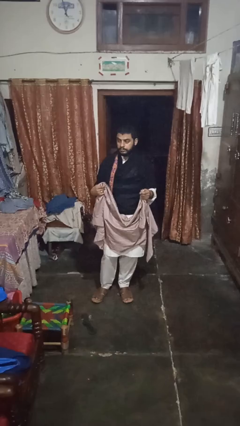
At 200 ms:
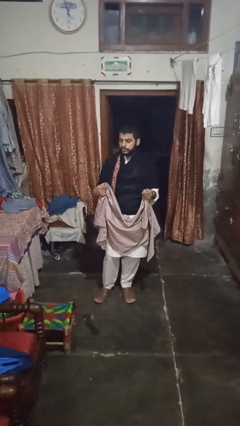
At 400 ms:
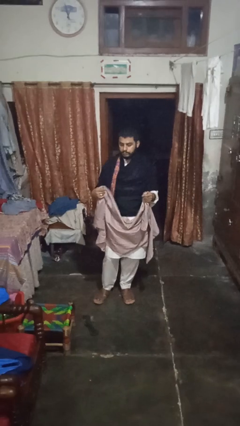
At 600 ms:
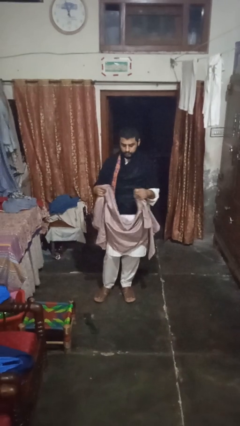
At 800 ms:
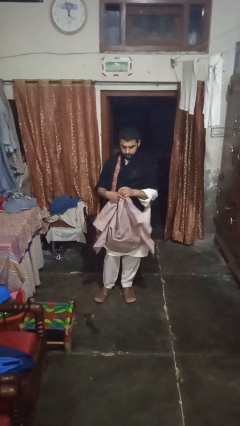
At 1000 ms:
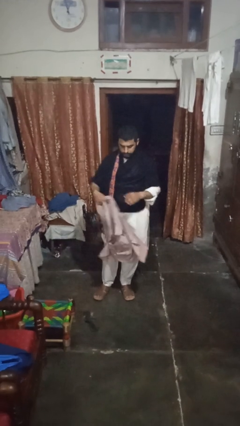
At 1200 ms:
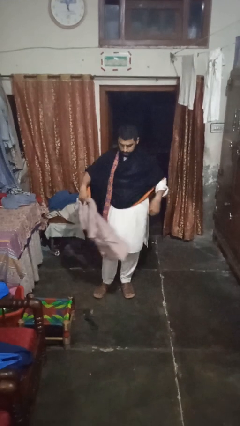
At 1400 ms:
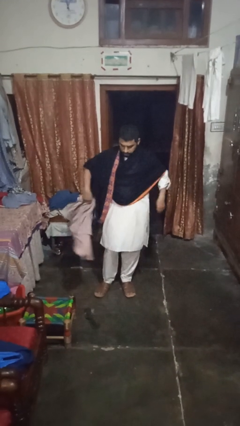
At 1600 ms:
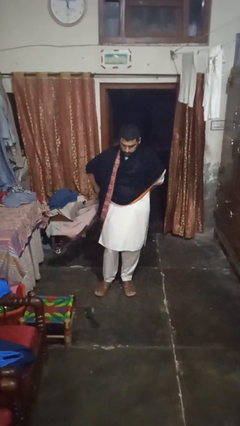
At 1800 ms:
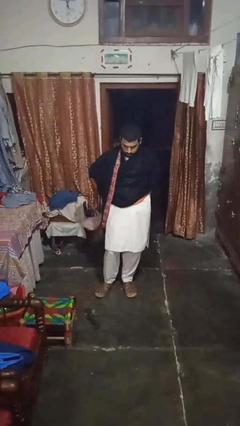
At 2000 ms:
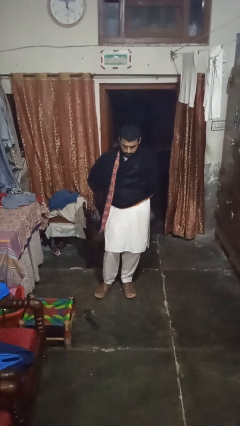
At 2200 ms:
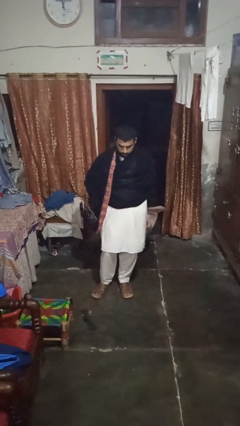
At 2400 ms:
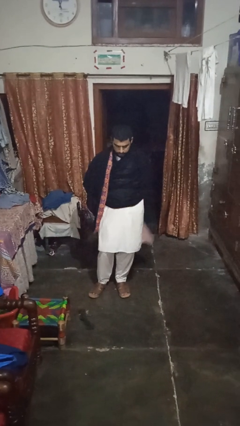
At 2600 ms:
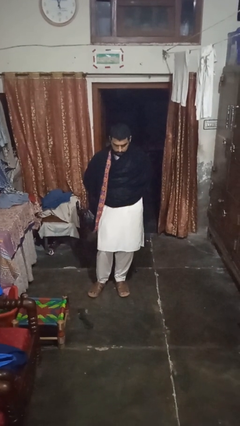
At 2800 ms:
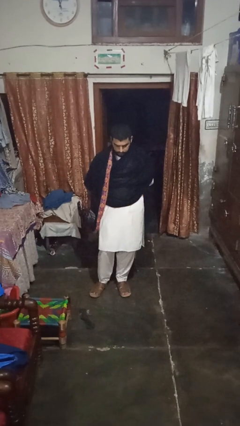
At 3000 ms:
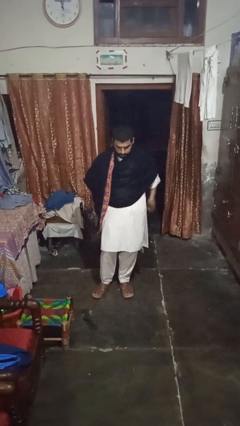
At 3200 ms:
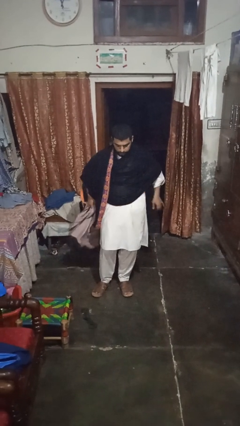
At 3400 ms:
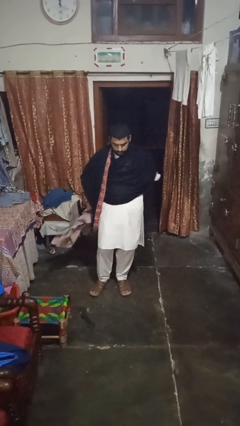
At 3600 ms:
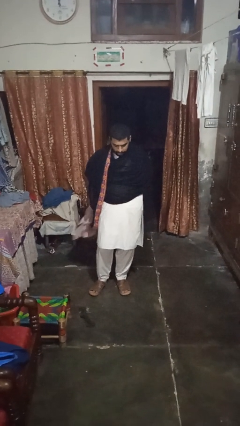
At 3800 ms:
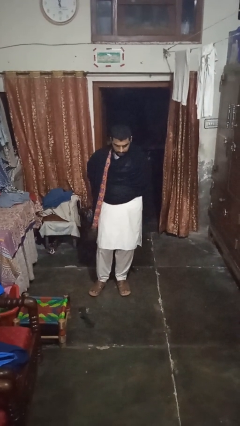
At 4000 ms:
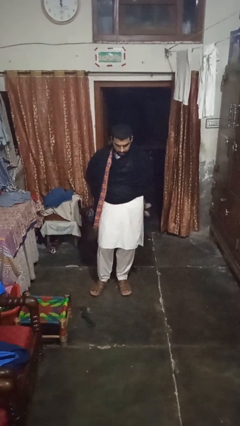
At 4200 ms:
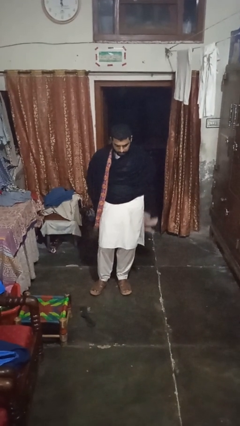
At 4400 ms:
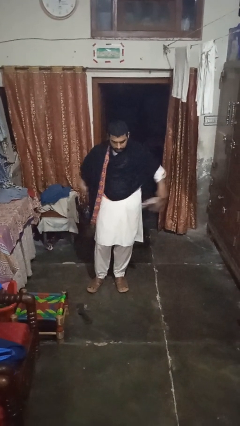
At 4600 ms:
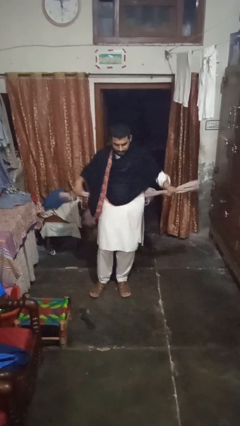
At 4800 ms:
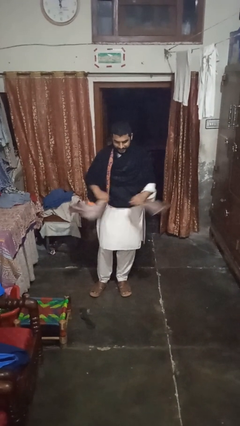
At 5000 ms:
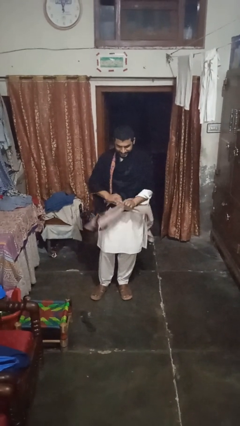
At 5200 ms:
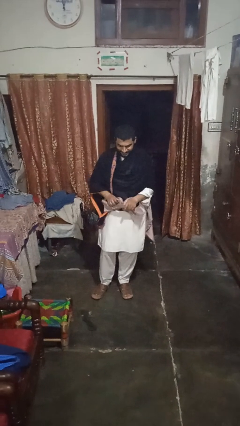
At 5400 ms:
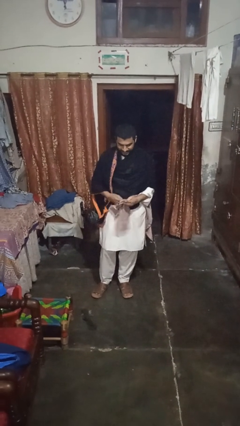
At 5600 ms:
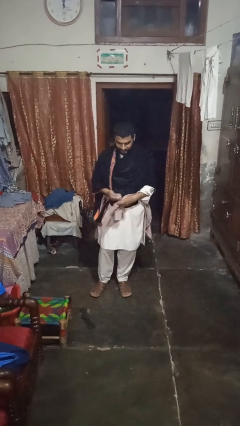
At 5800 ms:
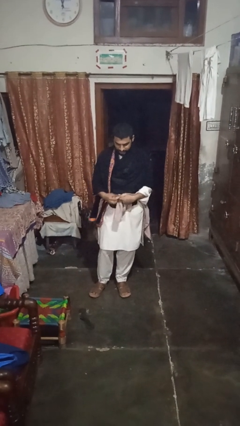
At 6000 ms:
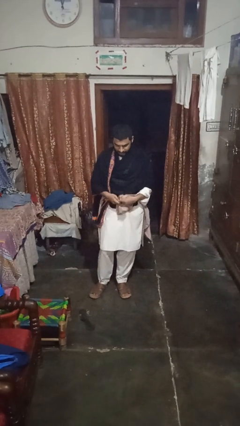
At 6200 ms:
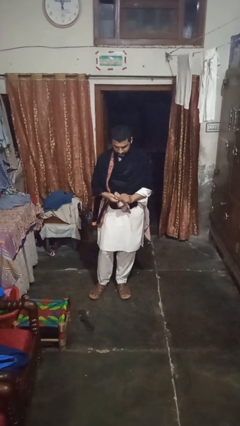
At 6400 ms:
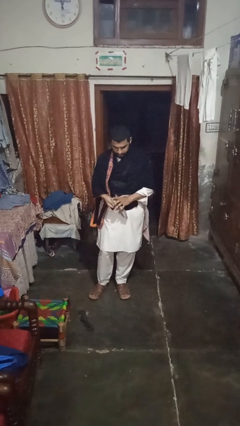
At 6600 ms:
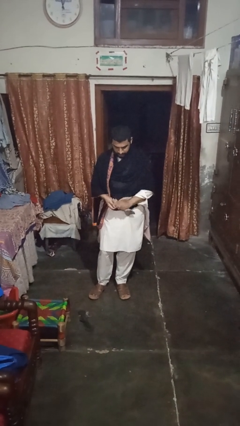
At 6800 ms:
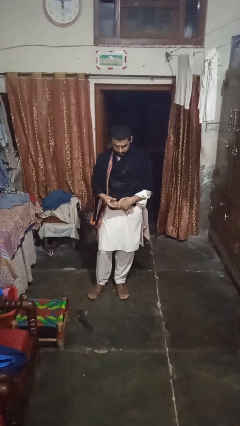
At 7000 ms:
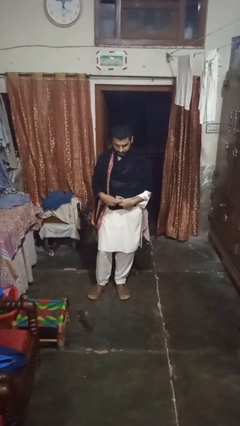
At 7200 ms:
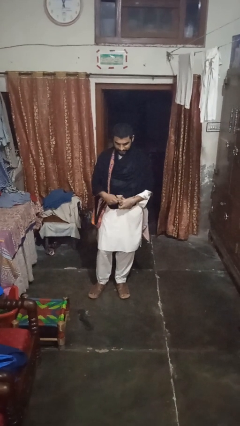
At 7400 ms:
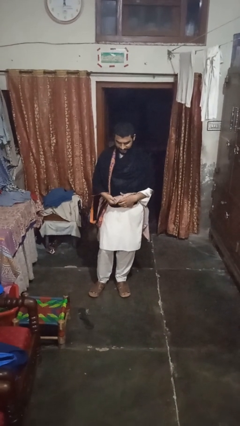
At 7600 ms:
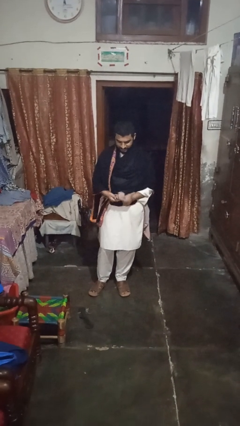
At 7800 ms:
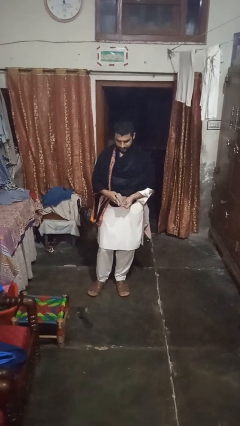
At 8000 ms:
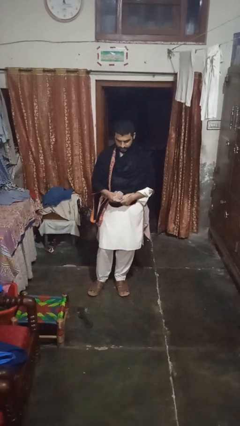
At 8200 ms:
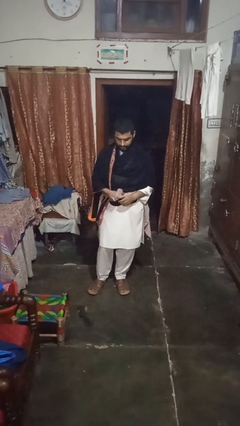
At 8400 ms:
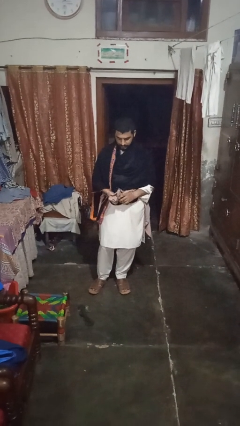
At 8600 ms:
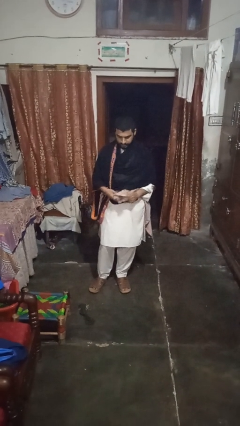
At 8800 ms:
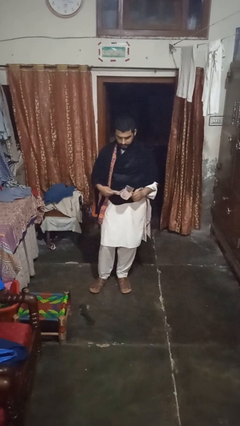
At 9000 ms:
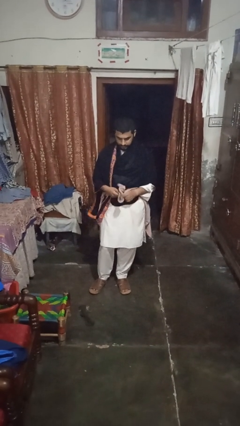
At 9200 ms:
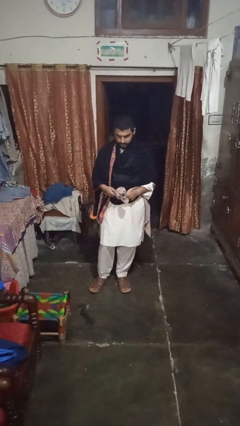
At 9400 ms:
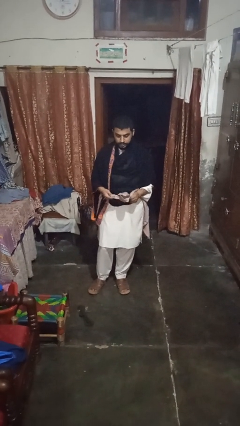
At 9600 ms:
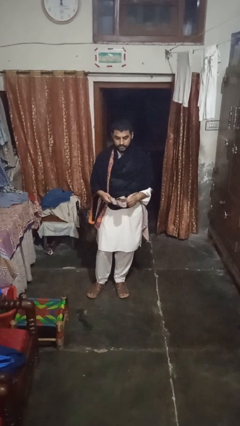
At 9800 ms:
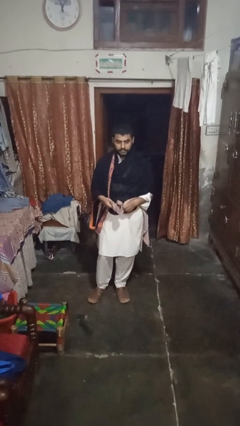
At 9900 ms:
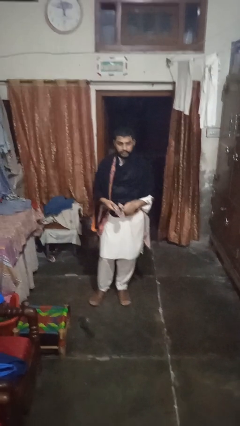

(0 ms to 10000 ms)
person ties jacket around waist

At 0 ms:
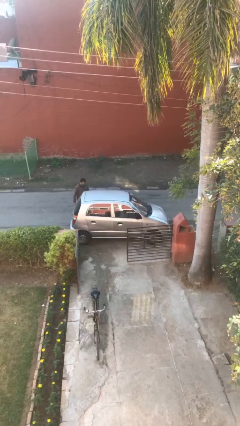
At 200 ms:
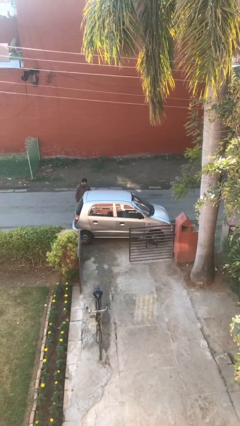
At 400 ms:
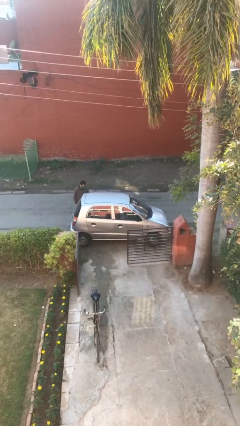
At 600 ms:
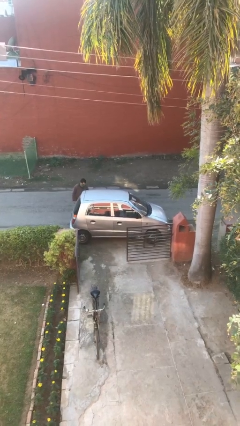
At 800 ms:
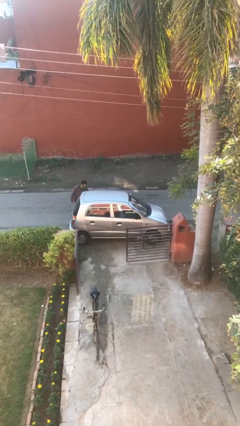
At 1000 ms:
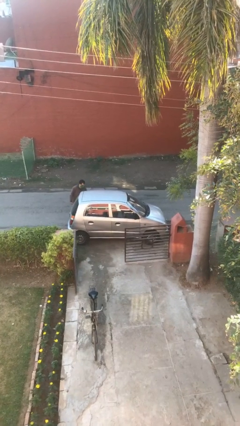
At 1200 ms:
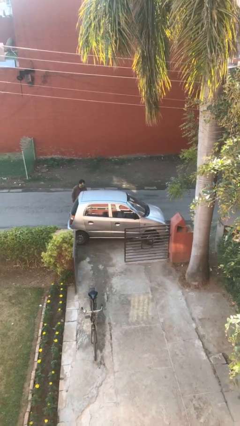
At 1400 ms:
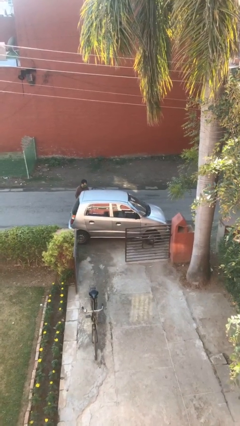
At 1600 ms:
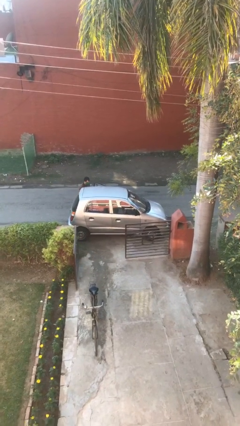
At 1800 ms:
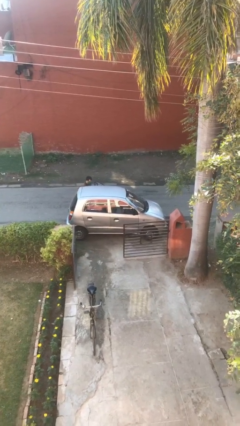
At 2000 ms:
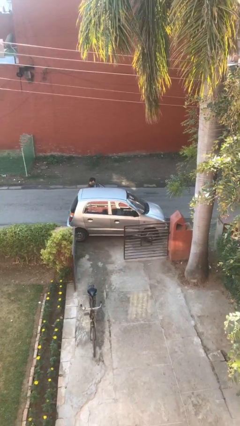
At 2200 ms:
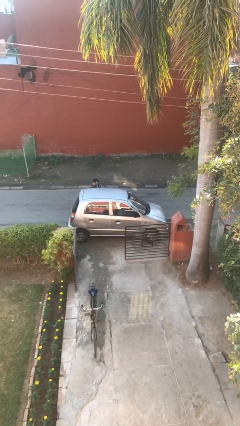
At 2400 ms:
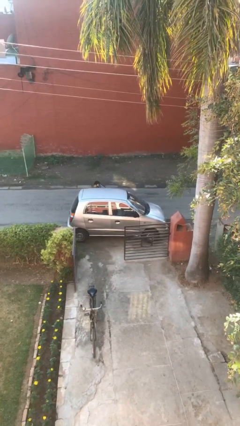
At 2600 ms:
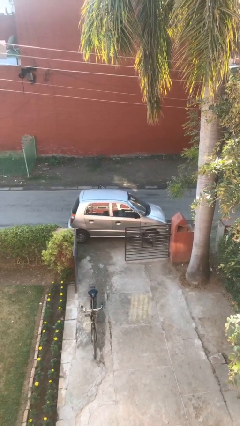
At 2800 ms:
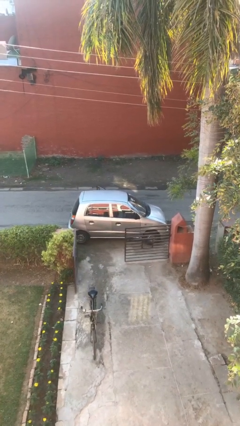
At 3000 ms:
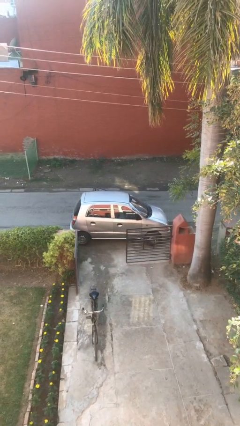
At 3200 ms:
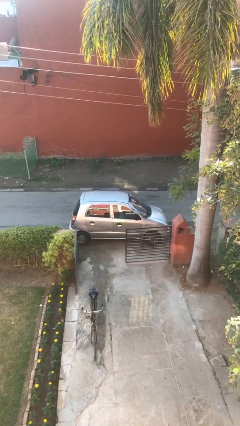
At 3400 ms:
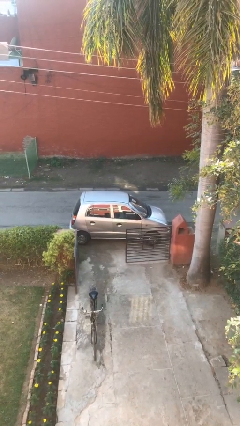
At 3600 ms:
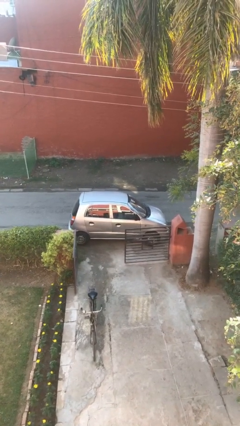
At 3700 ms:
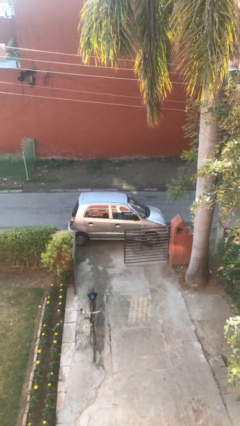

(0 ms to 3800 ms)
car picks up person

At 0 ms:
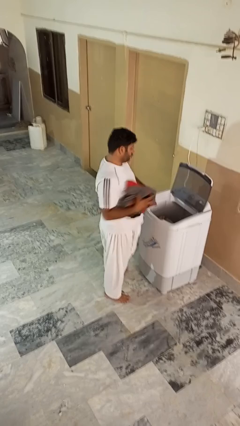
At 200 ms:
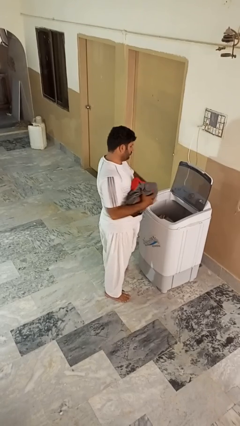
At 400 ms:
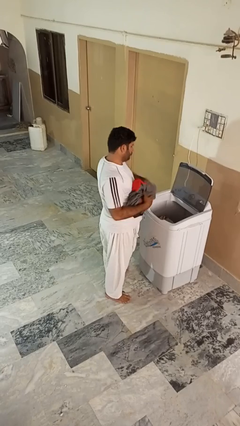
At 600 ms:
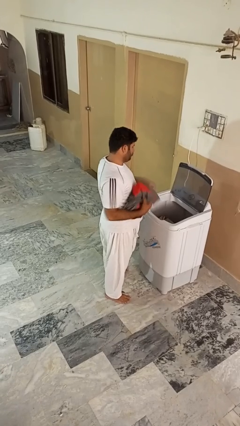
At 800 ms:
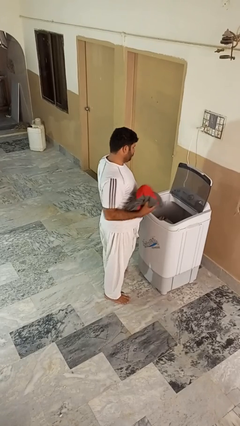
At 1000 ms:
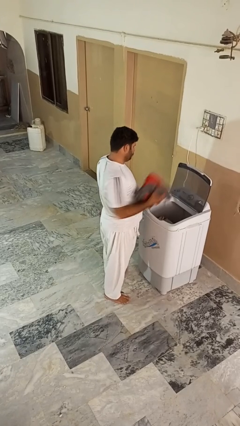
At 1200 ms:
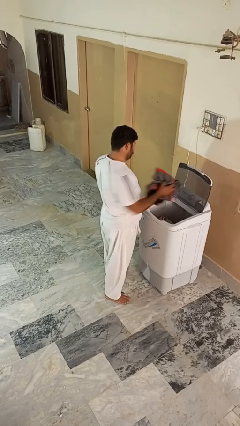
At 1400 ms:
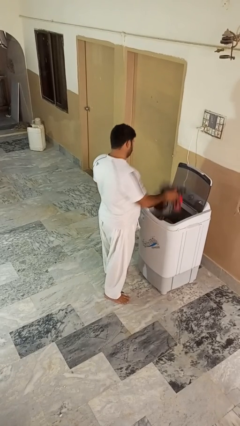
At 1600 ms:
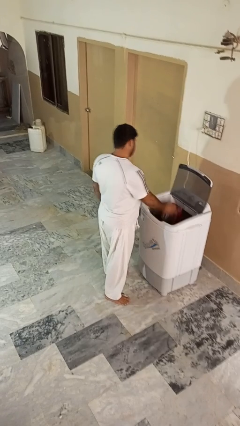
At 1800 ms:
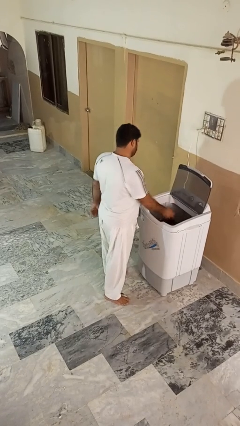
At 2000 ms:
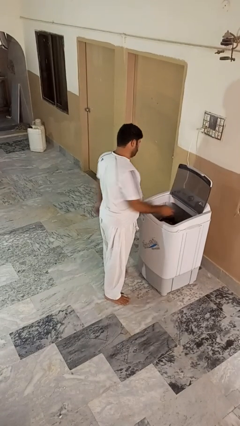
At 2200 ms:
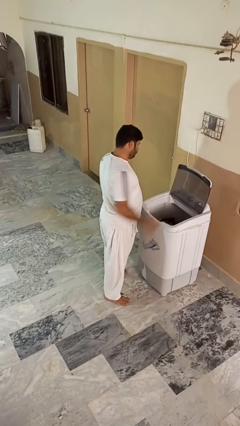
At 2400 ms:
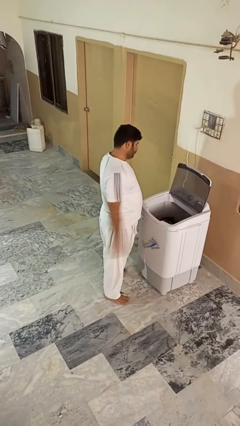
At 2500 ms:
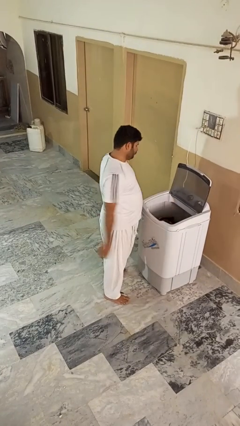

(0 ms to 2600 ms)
person loads clotheswasher

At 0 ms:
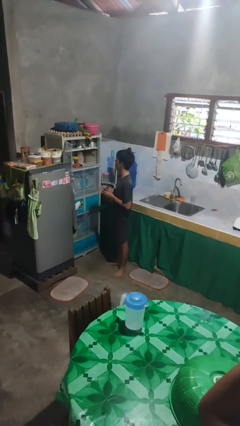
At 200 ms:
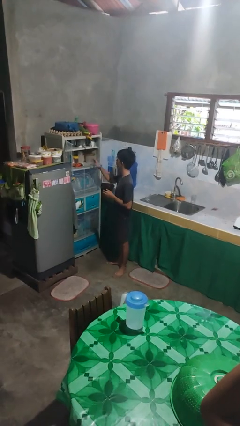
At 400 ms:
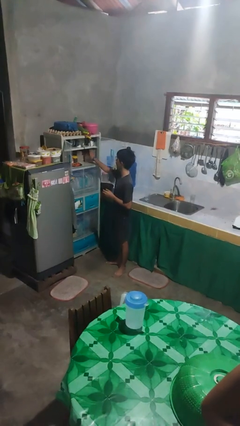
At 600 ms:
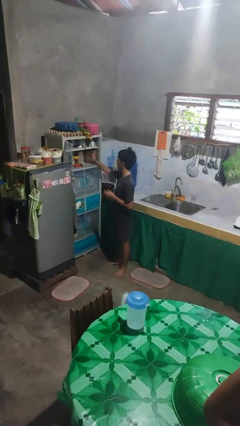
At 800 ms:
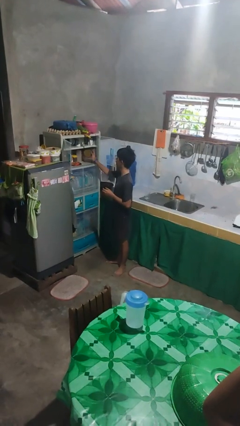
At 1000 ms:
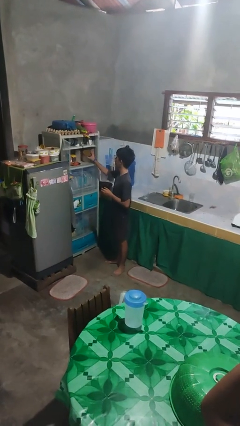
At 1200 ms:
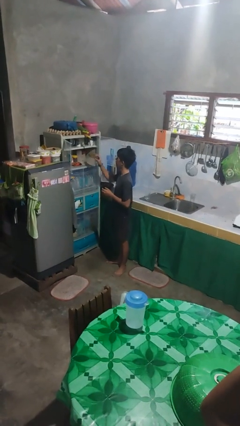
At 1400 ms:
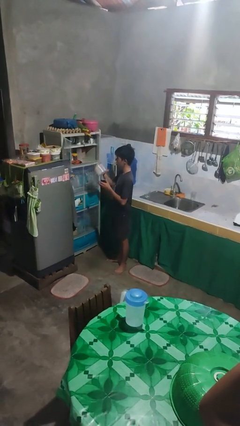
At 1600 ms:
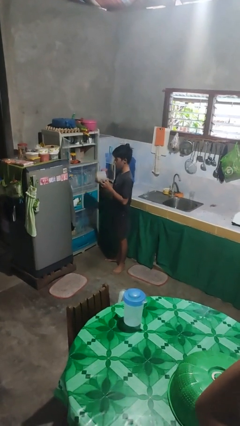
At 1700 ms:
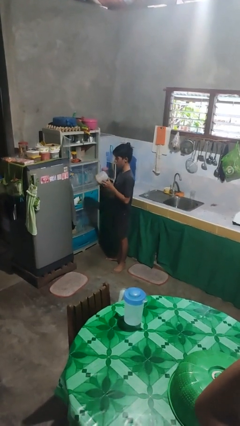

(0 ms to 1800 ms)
person takes object from cabinet
